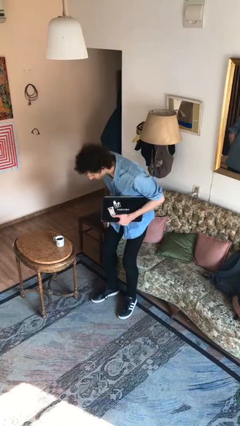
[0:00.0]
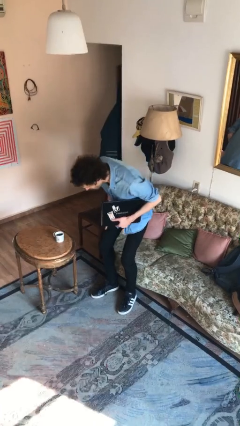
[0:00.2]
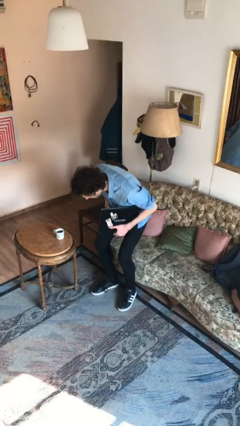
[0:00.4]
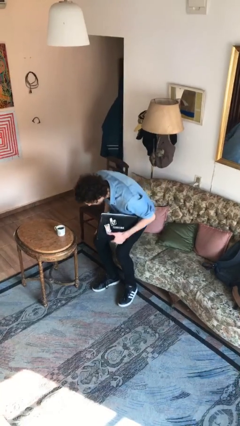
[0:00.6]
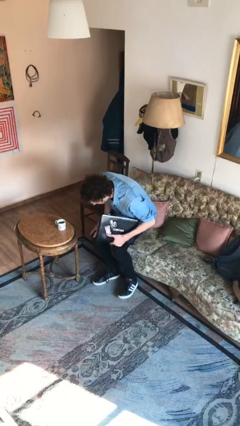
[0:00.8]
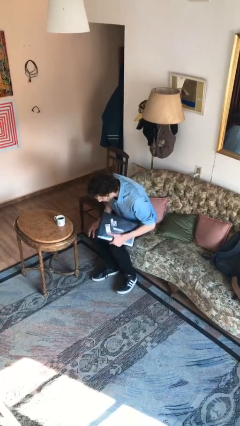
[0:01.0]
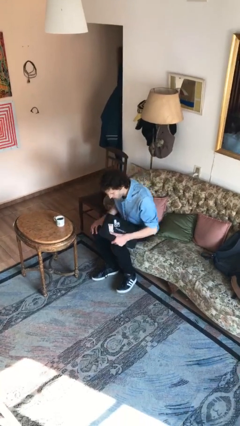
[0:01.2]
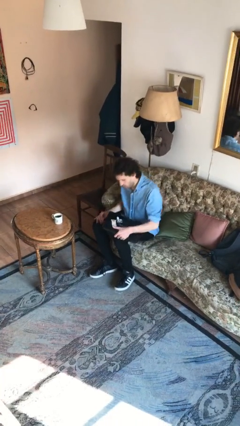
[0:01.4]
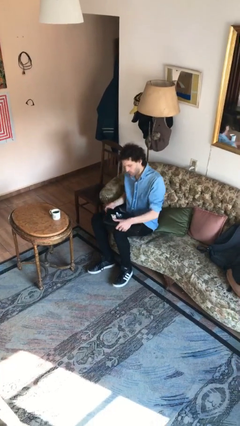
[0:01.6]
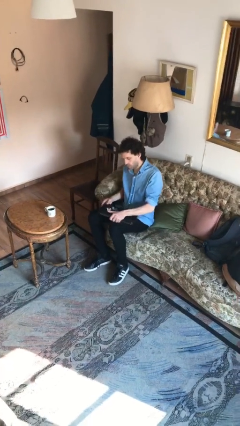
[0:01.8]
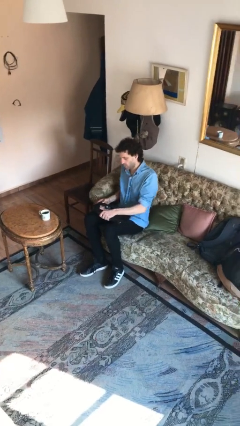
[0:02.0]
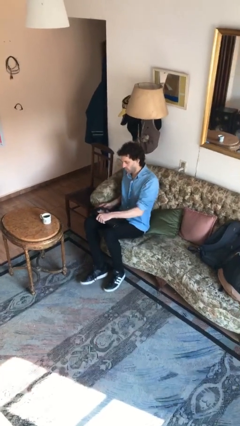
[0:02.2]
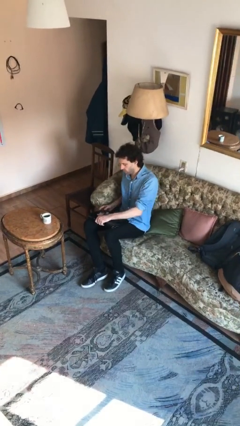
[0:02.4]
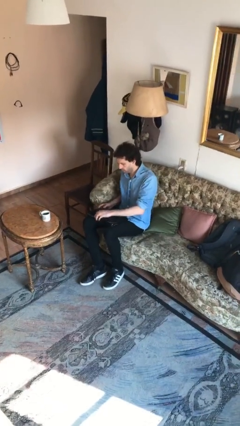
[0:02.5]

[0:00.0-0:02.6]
person sits down

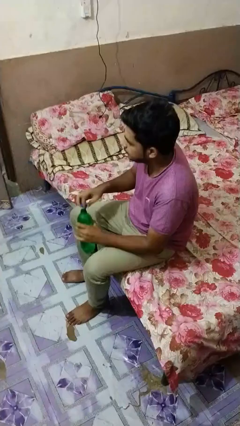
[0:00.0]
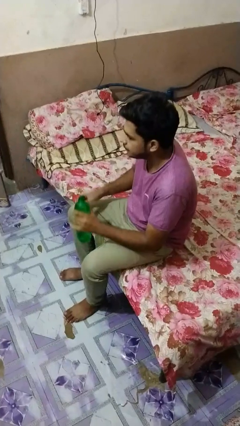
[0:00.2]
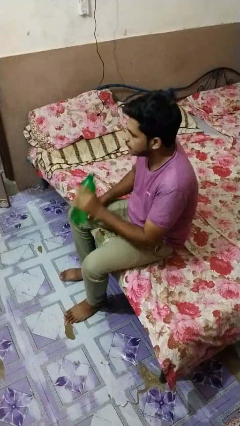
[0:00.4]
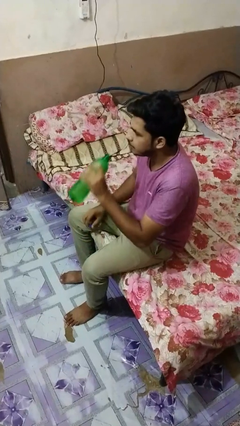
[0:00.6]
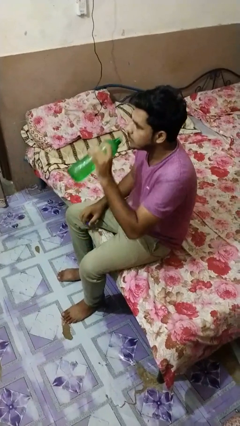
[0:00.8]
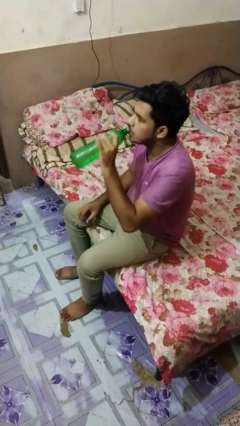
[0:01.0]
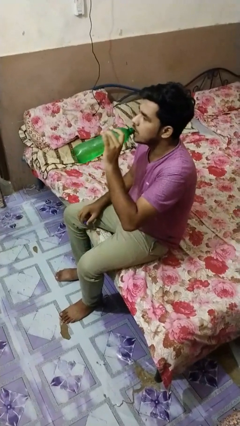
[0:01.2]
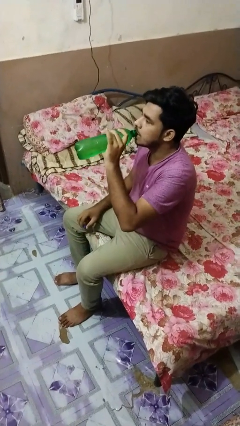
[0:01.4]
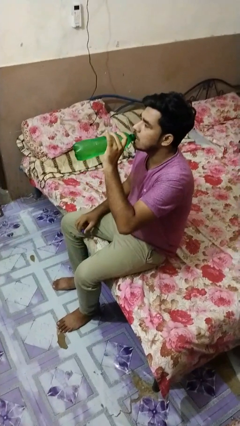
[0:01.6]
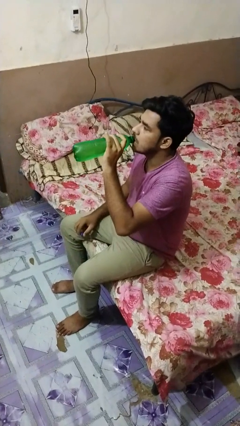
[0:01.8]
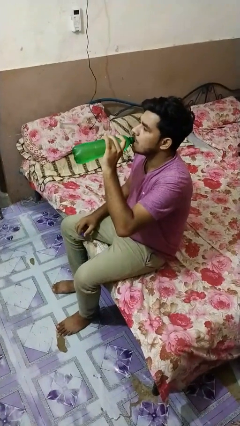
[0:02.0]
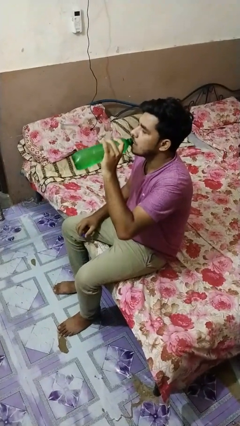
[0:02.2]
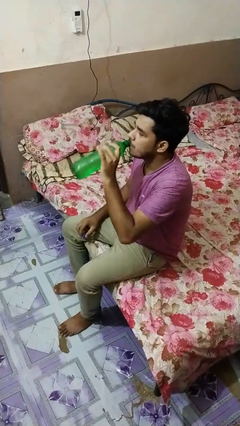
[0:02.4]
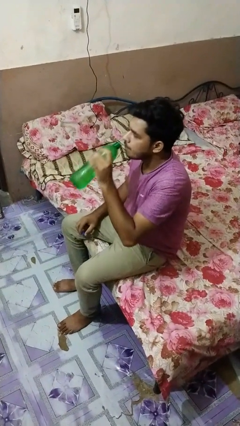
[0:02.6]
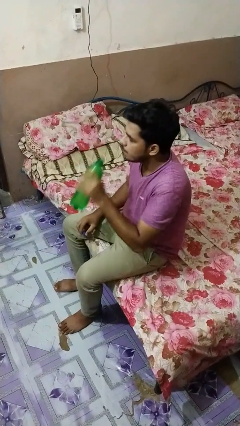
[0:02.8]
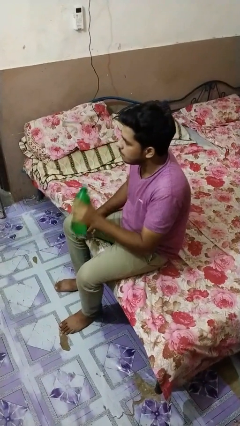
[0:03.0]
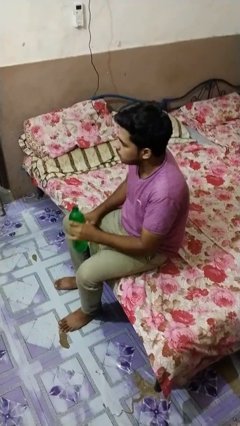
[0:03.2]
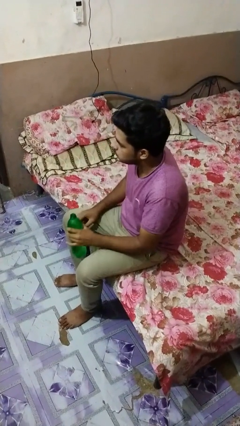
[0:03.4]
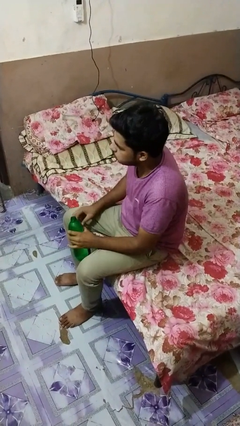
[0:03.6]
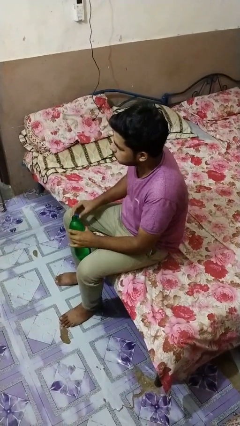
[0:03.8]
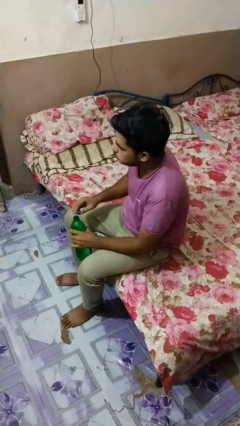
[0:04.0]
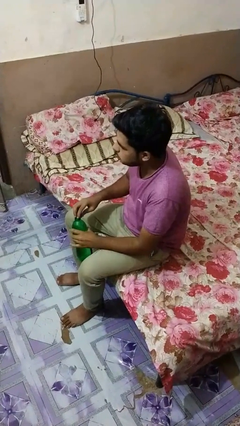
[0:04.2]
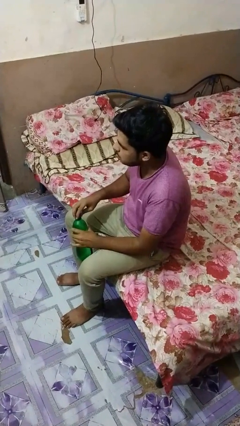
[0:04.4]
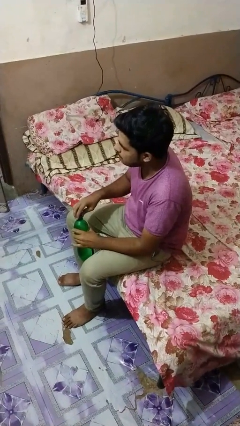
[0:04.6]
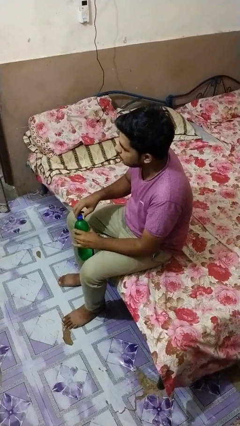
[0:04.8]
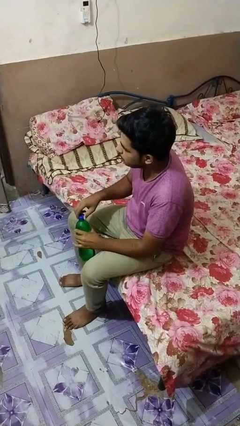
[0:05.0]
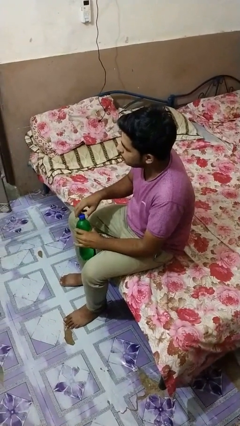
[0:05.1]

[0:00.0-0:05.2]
person drinks from bottle

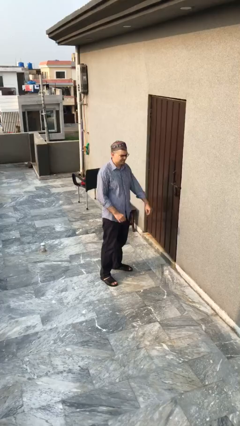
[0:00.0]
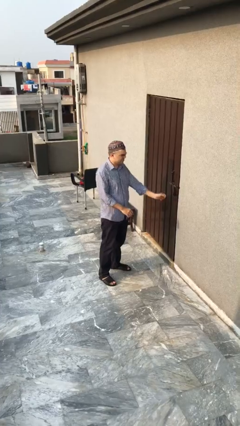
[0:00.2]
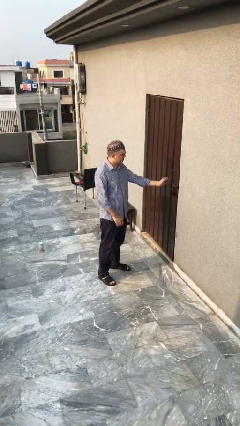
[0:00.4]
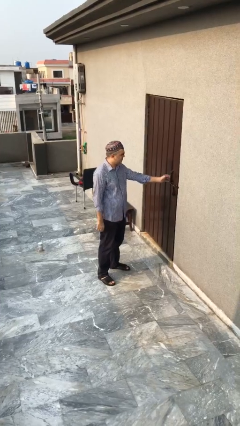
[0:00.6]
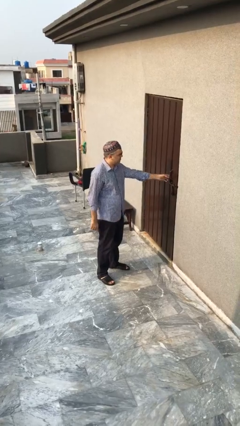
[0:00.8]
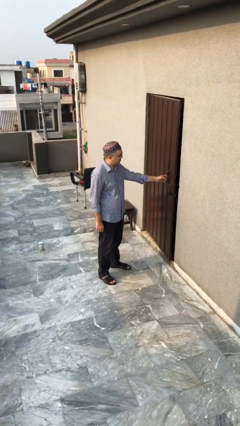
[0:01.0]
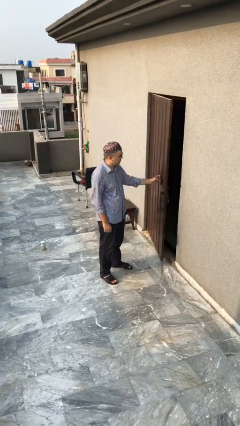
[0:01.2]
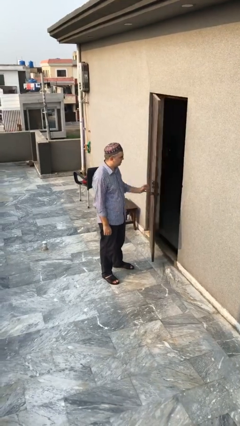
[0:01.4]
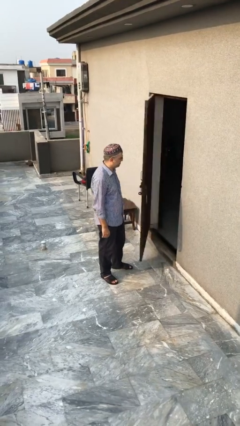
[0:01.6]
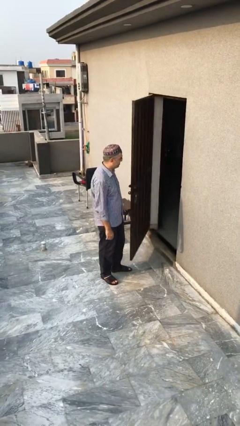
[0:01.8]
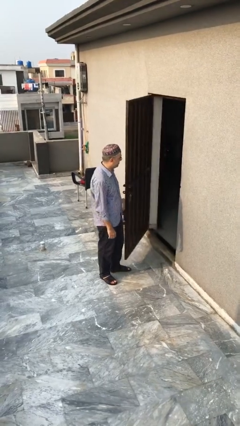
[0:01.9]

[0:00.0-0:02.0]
person opens facility door

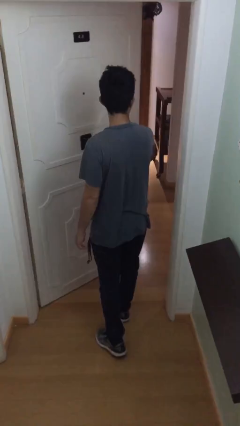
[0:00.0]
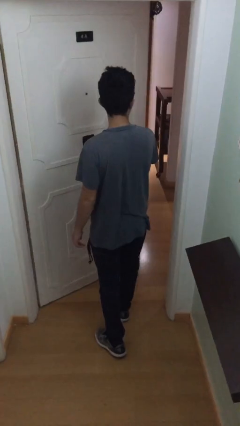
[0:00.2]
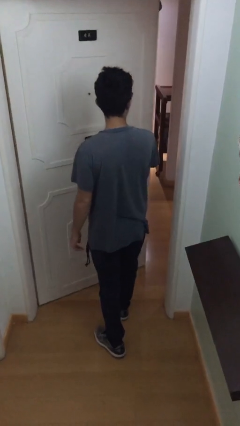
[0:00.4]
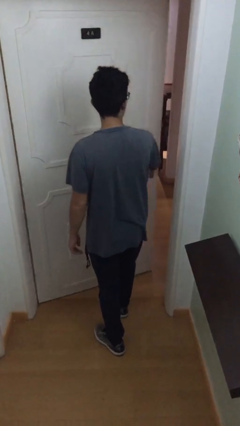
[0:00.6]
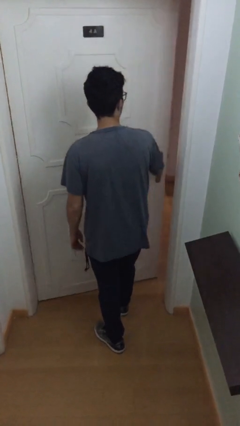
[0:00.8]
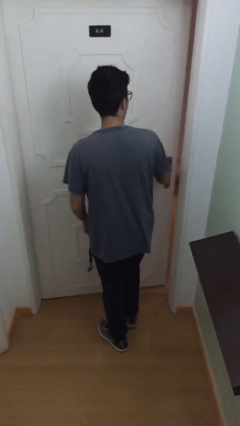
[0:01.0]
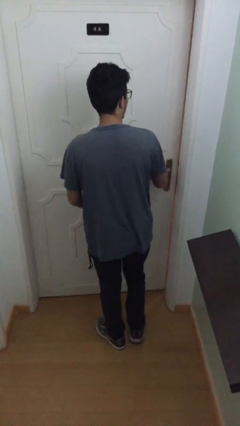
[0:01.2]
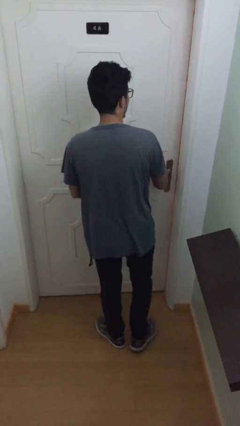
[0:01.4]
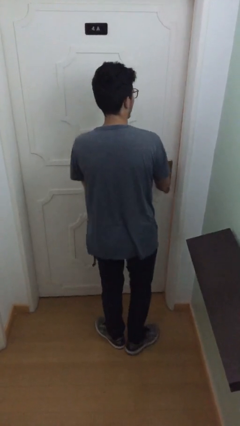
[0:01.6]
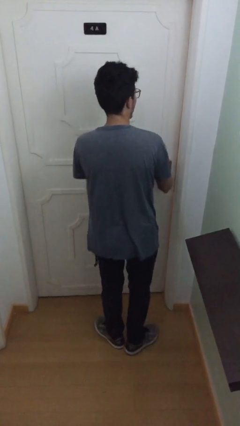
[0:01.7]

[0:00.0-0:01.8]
person closes facility door

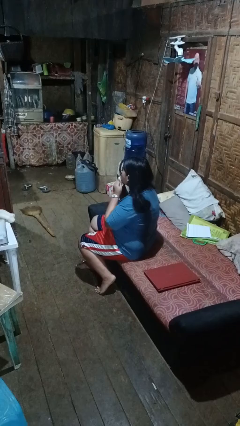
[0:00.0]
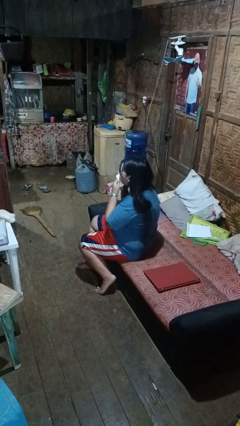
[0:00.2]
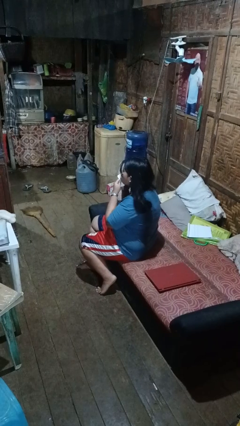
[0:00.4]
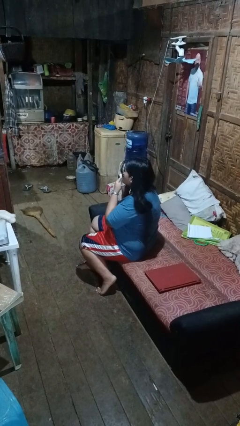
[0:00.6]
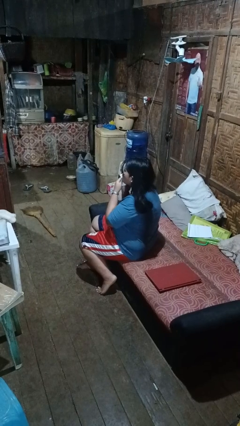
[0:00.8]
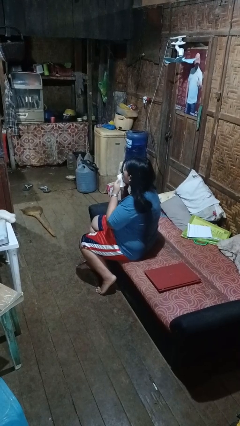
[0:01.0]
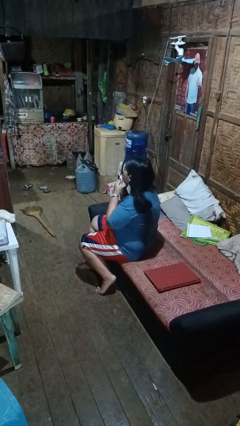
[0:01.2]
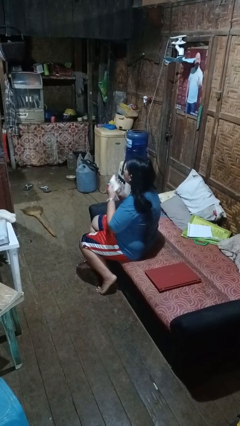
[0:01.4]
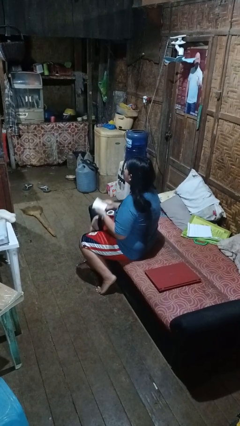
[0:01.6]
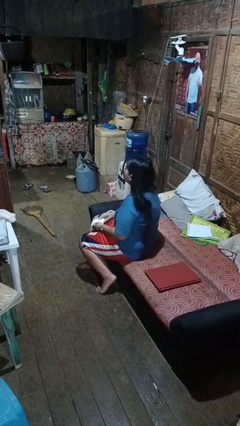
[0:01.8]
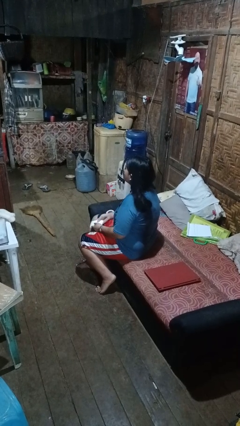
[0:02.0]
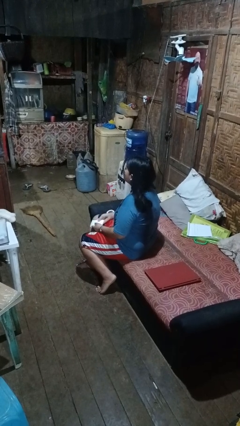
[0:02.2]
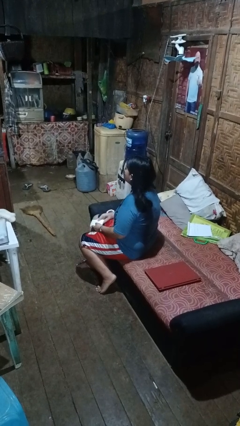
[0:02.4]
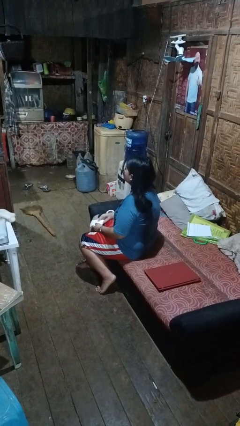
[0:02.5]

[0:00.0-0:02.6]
person wipes mouth with napkin

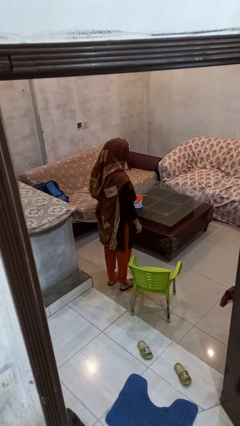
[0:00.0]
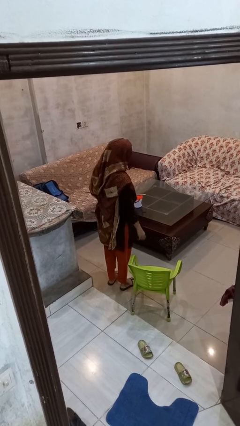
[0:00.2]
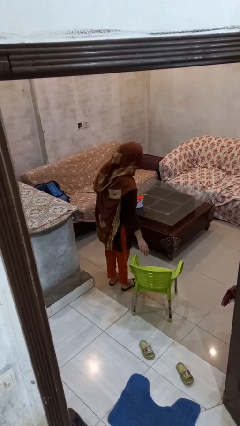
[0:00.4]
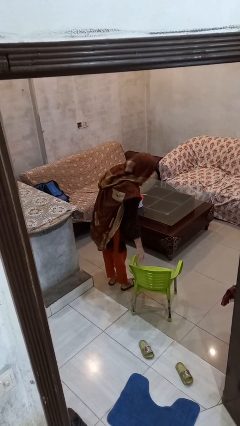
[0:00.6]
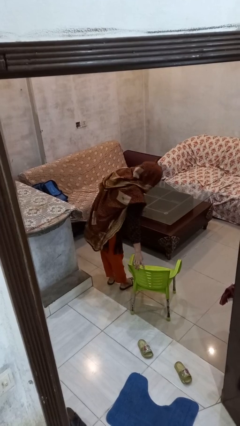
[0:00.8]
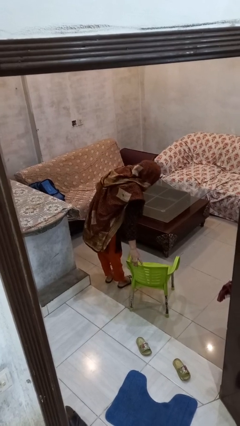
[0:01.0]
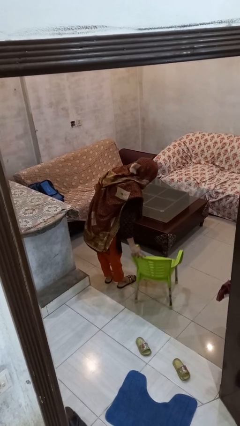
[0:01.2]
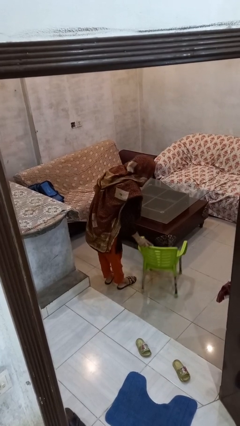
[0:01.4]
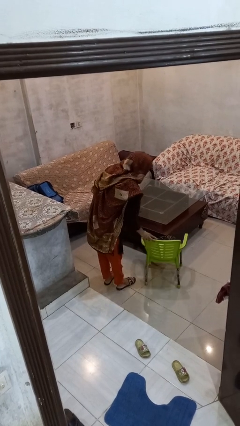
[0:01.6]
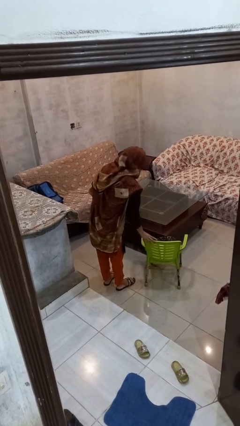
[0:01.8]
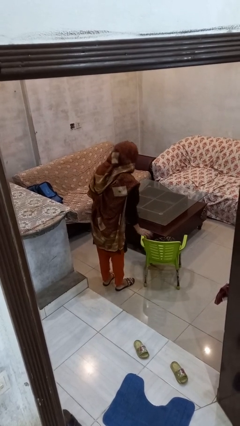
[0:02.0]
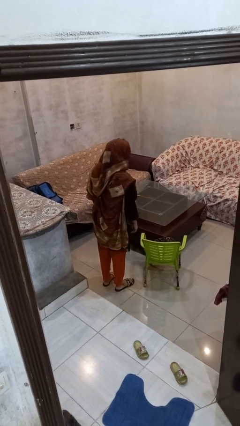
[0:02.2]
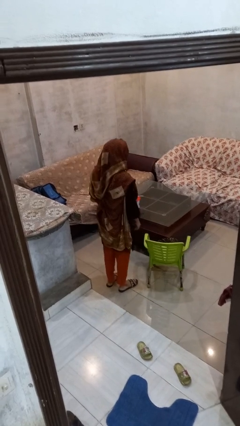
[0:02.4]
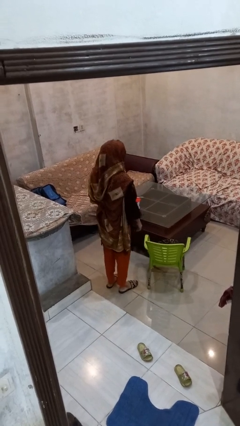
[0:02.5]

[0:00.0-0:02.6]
person pushes in chair

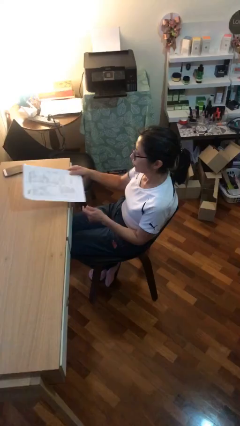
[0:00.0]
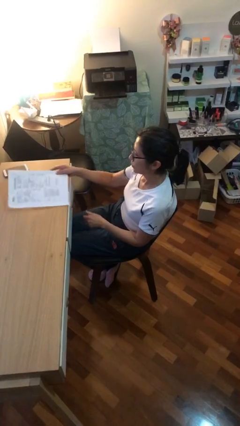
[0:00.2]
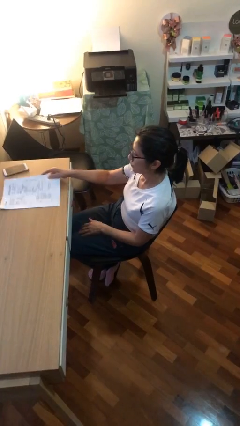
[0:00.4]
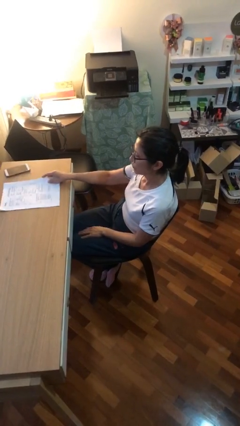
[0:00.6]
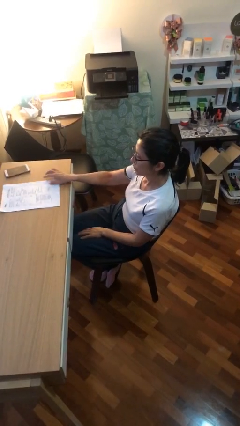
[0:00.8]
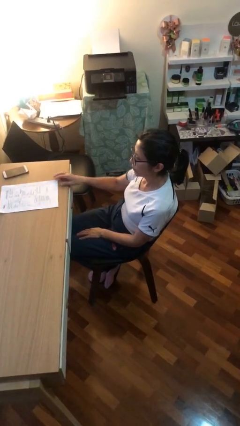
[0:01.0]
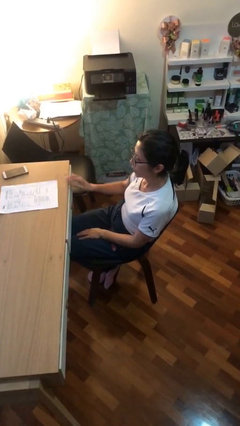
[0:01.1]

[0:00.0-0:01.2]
person puts down object on table
